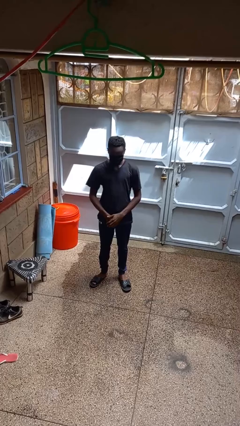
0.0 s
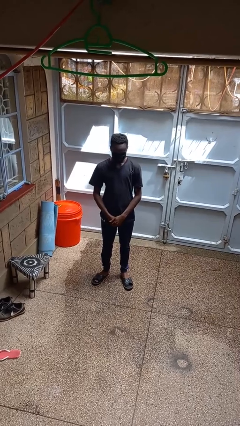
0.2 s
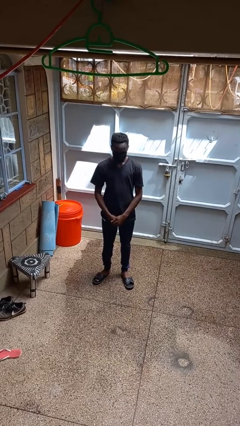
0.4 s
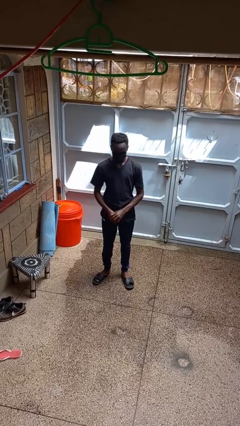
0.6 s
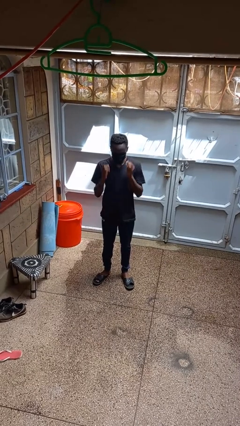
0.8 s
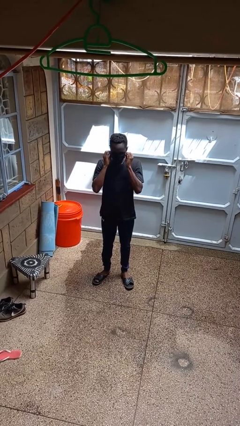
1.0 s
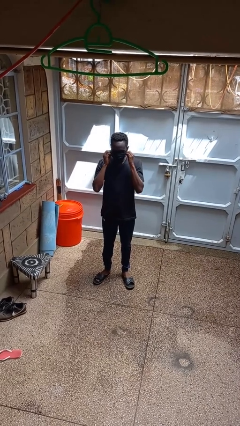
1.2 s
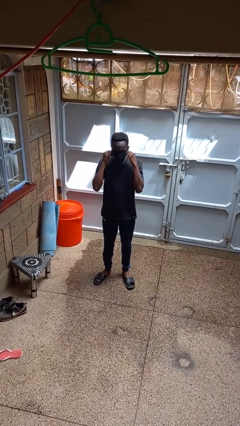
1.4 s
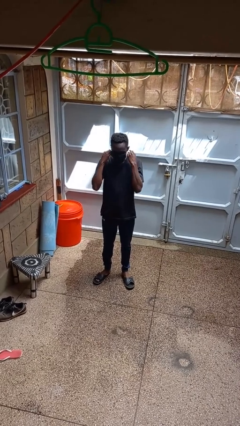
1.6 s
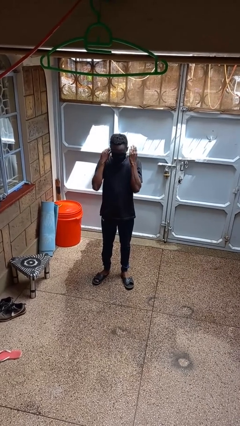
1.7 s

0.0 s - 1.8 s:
person takes off facemask

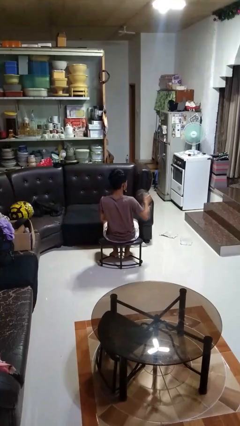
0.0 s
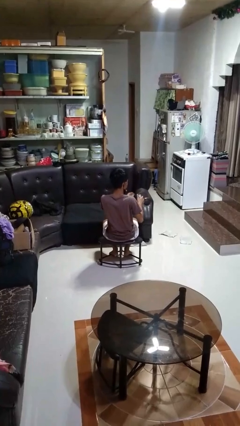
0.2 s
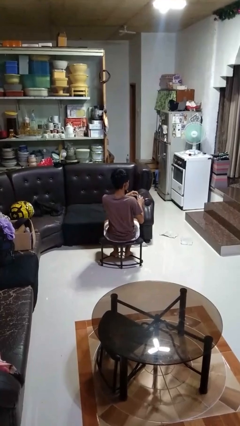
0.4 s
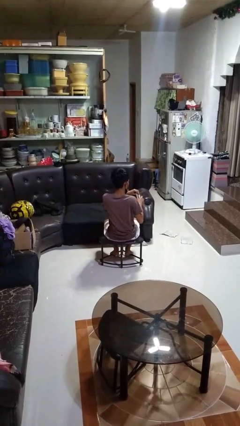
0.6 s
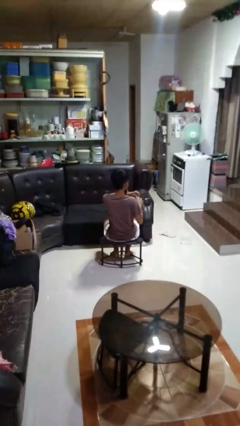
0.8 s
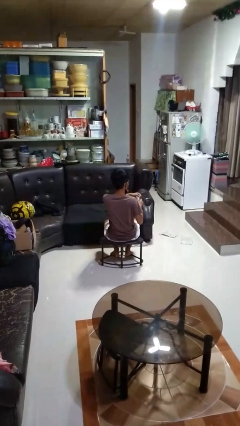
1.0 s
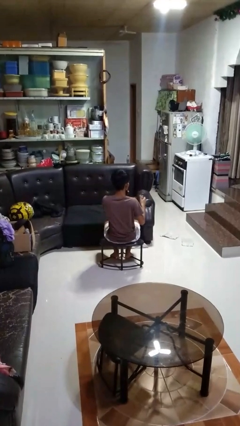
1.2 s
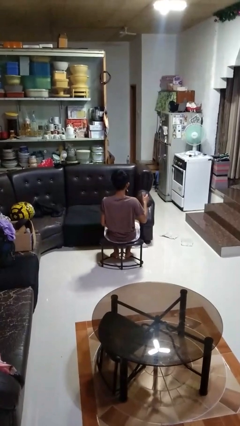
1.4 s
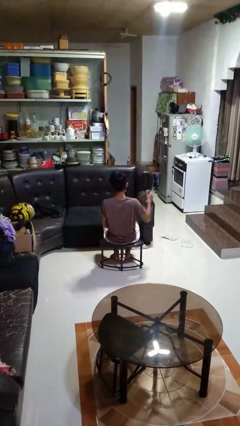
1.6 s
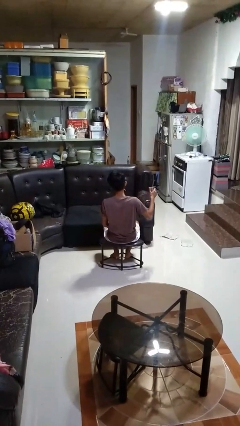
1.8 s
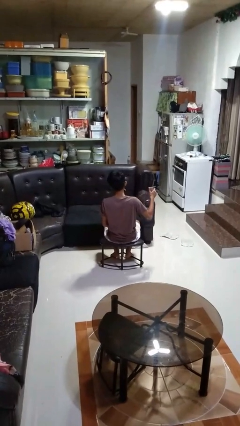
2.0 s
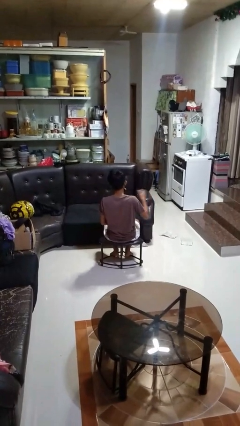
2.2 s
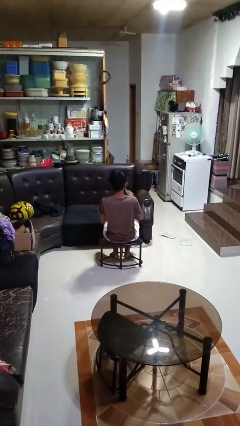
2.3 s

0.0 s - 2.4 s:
person opens beverage can

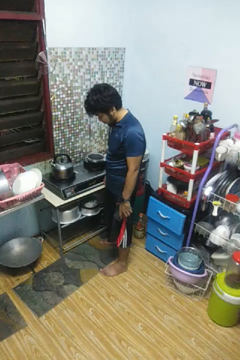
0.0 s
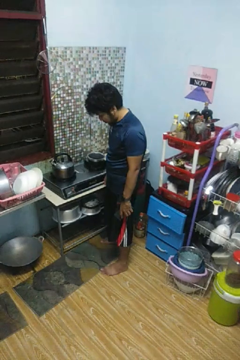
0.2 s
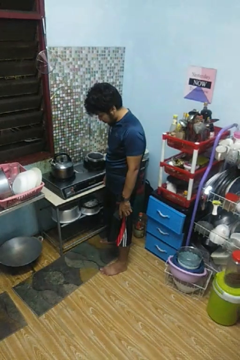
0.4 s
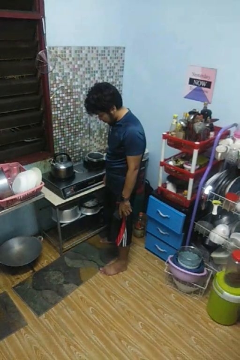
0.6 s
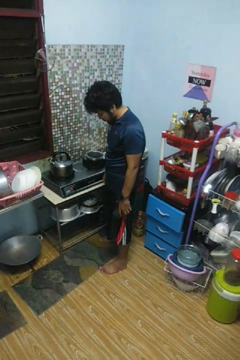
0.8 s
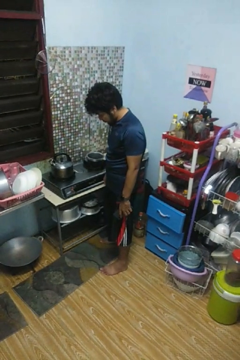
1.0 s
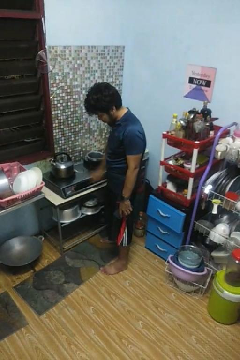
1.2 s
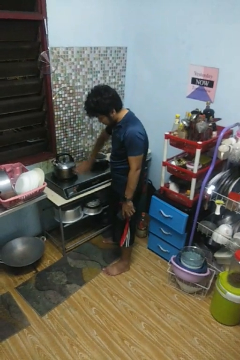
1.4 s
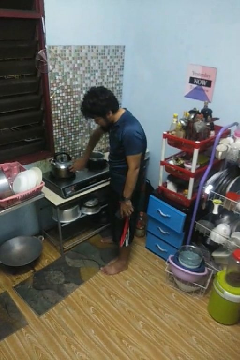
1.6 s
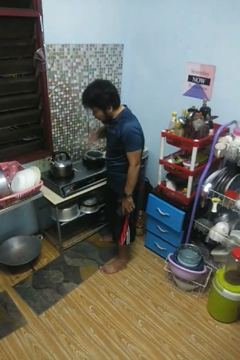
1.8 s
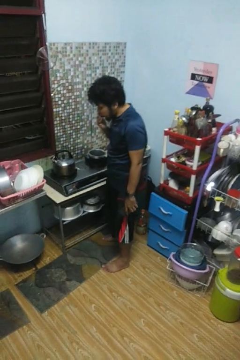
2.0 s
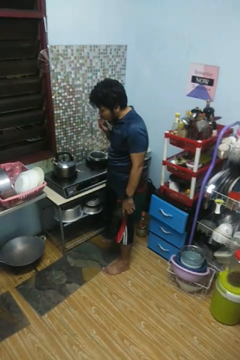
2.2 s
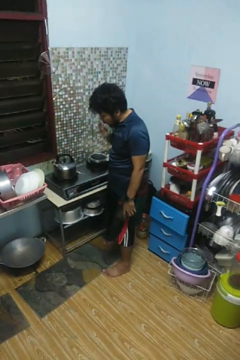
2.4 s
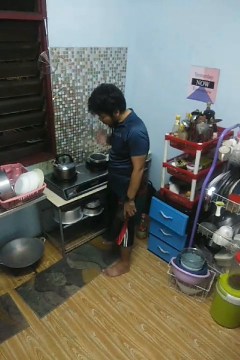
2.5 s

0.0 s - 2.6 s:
person burns hand

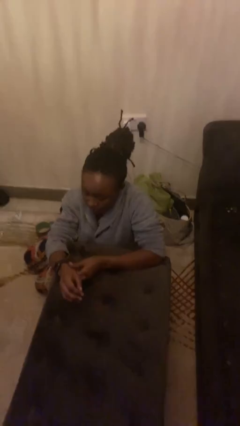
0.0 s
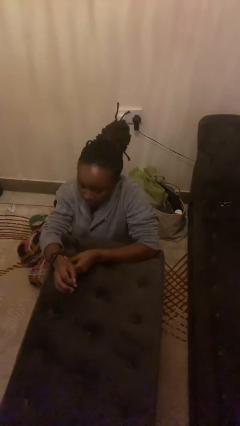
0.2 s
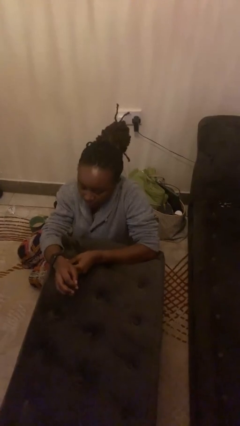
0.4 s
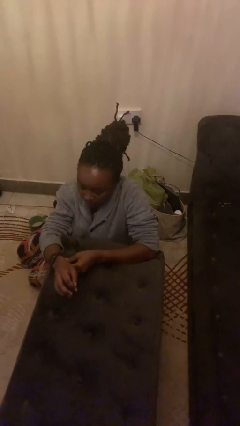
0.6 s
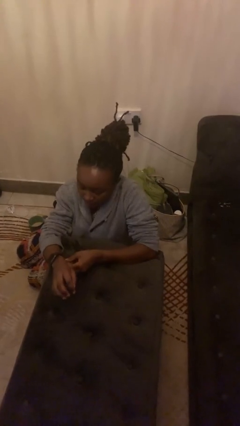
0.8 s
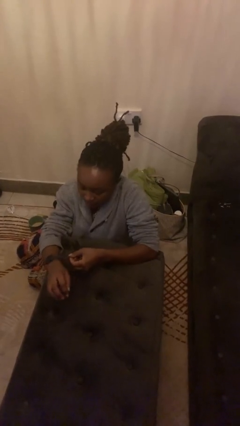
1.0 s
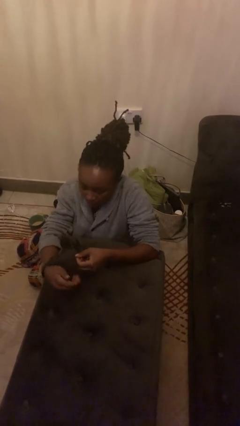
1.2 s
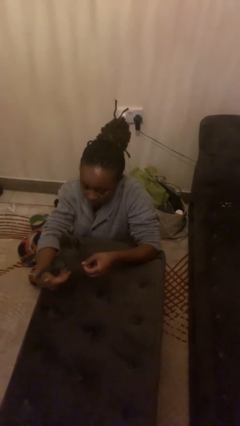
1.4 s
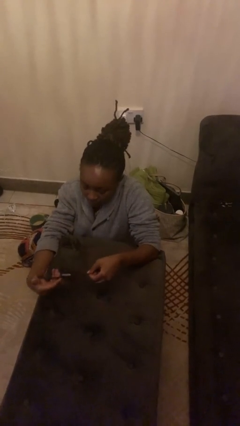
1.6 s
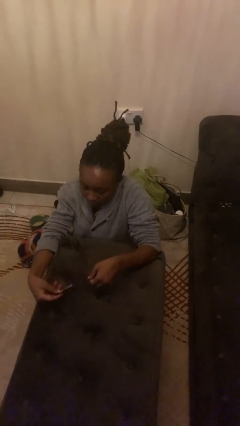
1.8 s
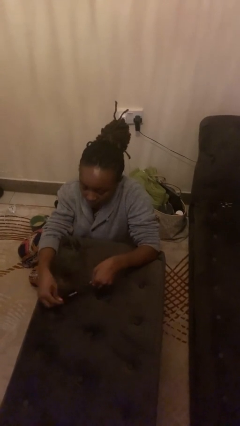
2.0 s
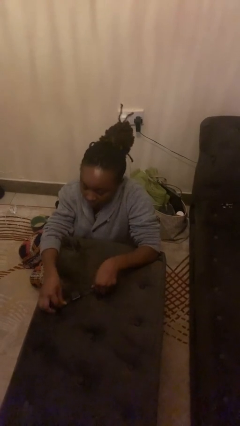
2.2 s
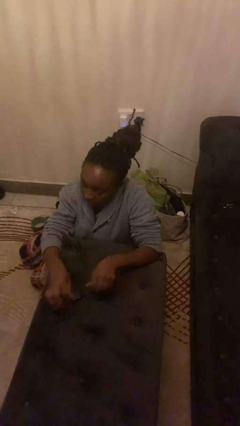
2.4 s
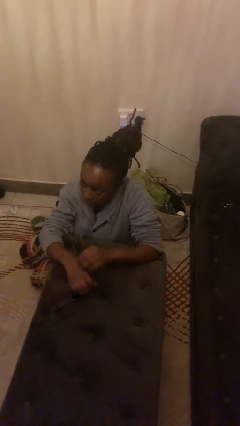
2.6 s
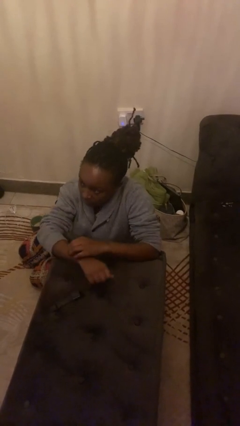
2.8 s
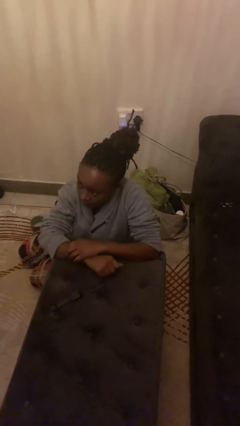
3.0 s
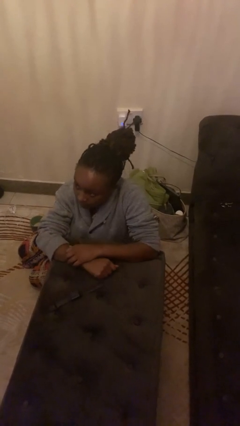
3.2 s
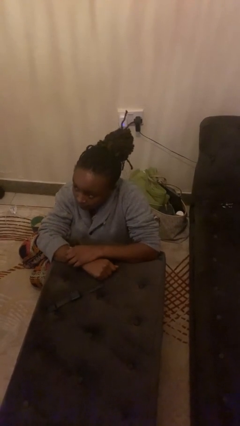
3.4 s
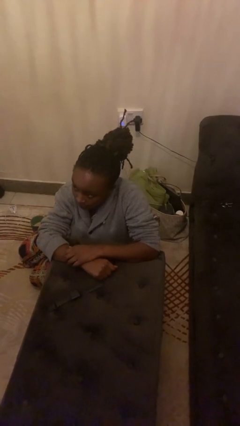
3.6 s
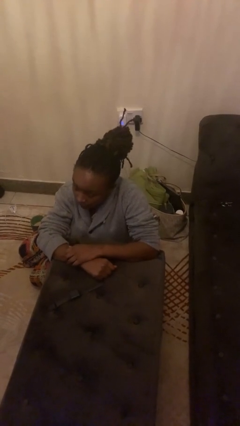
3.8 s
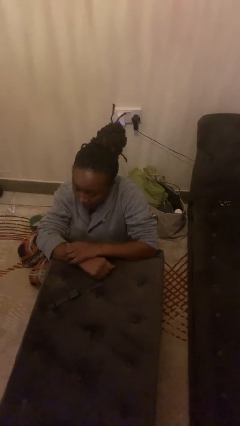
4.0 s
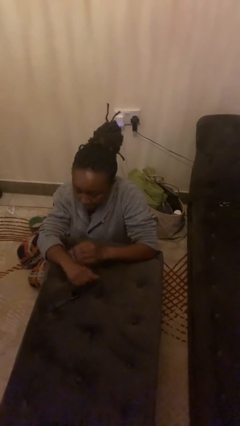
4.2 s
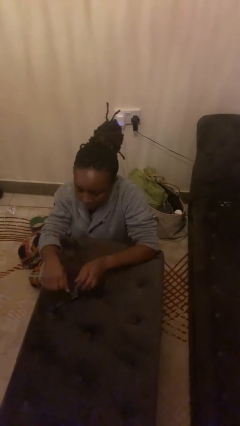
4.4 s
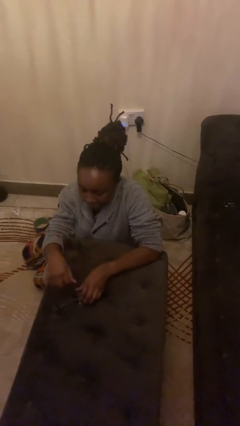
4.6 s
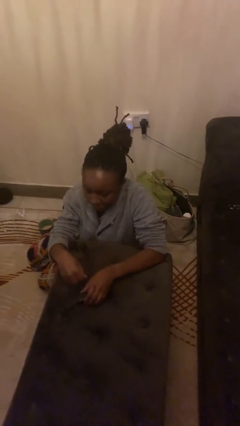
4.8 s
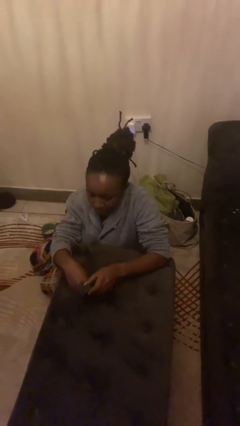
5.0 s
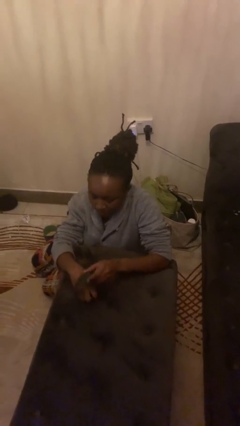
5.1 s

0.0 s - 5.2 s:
person takes off wristwatch

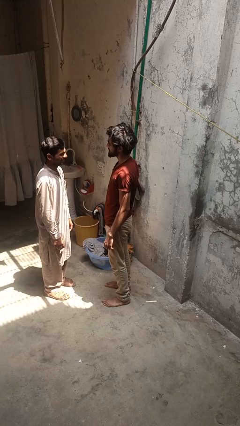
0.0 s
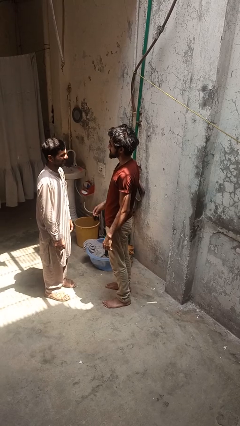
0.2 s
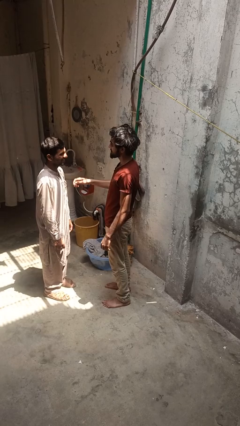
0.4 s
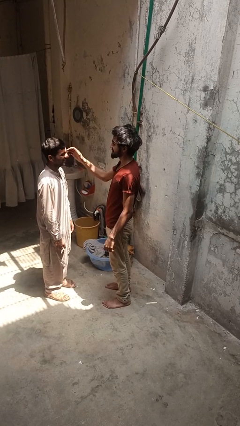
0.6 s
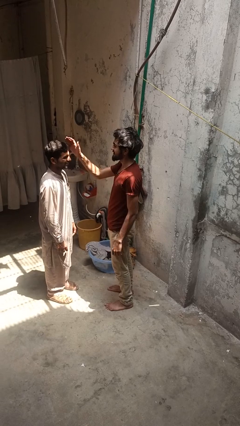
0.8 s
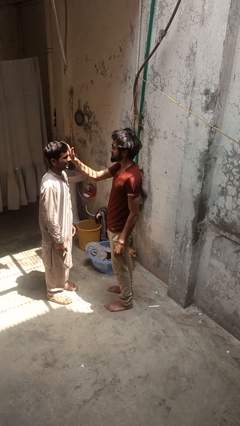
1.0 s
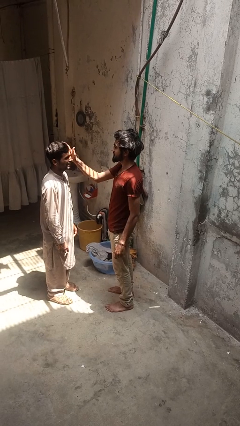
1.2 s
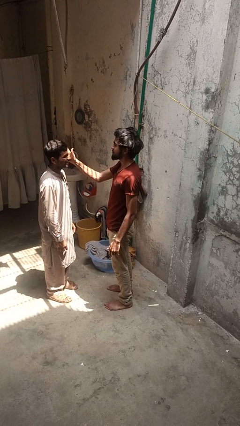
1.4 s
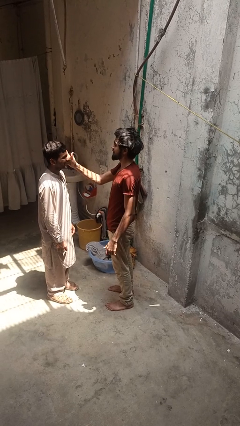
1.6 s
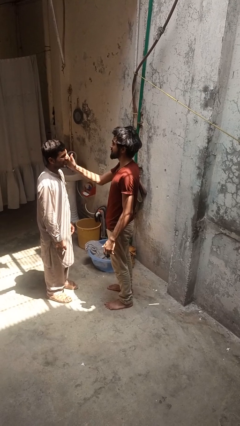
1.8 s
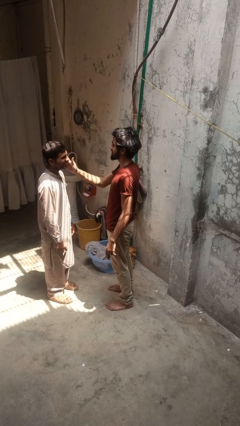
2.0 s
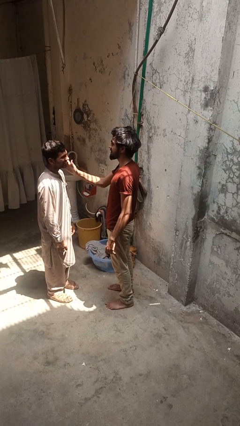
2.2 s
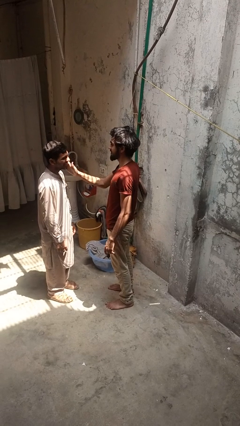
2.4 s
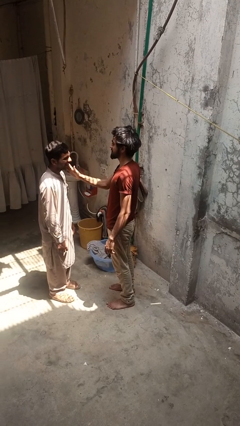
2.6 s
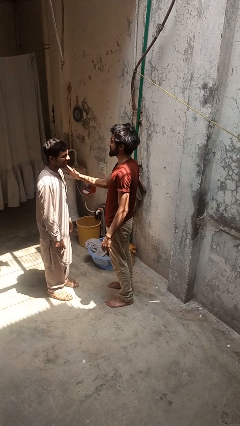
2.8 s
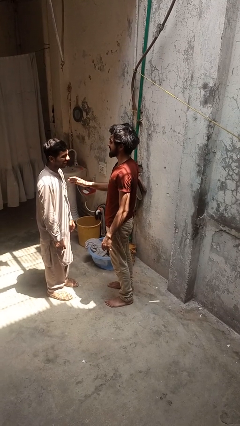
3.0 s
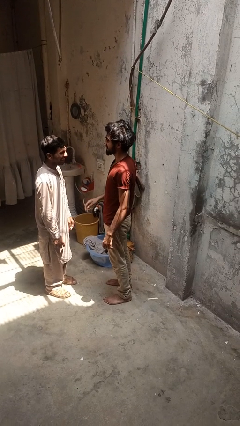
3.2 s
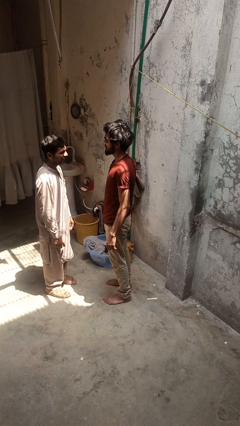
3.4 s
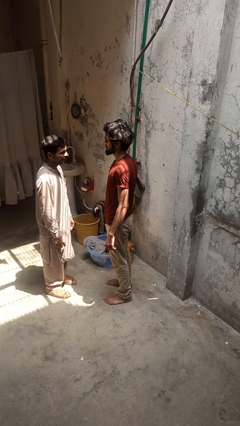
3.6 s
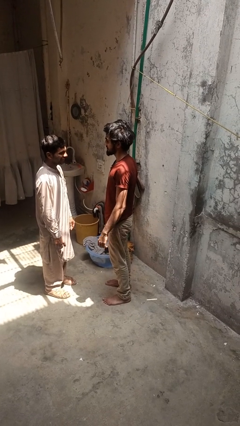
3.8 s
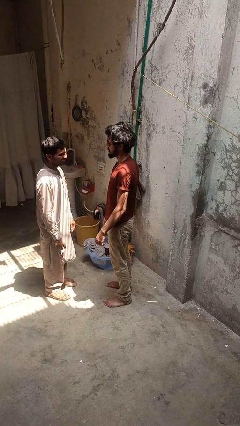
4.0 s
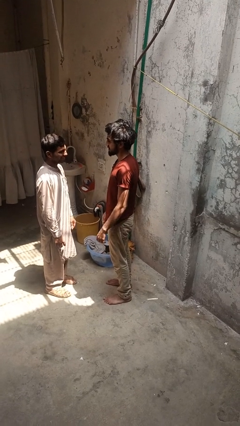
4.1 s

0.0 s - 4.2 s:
person touches face of person

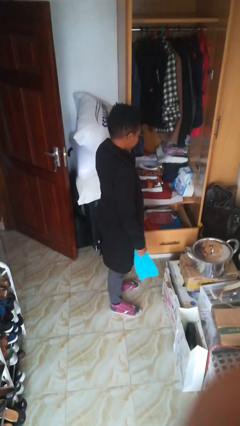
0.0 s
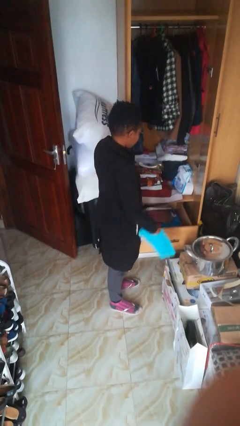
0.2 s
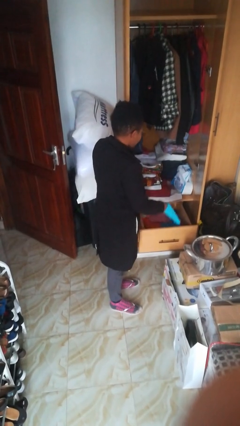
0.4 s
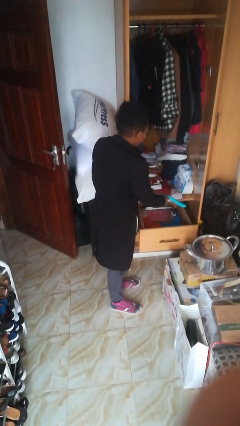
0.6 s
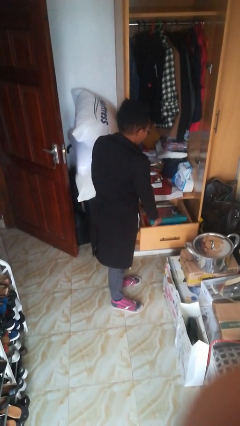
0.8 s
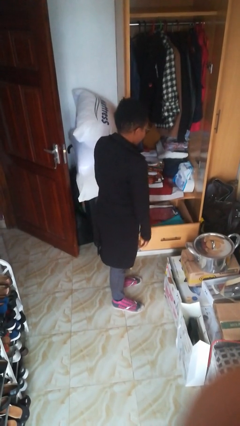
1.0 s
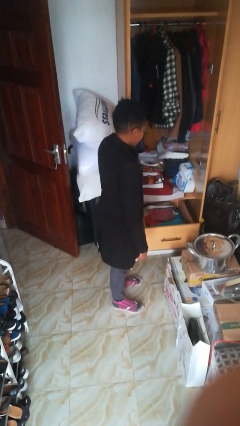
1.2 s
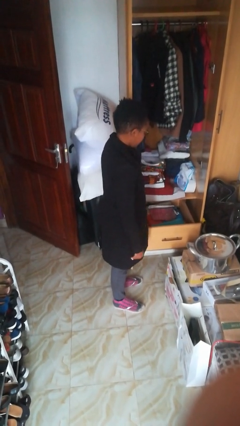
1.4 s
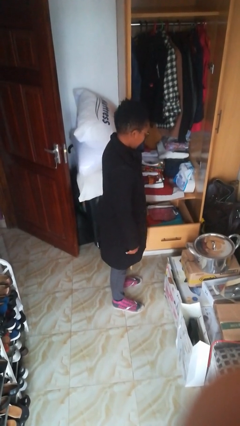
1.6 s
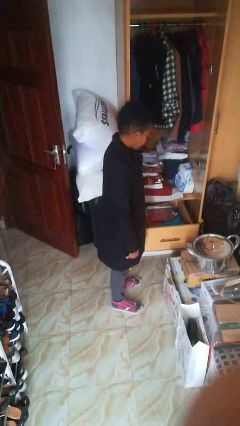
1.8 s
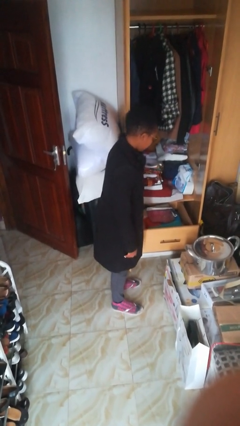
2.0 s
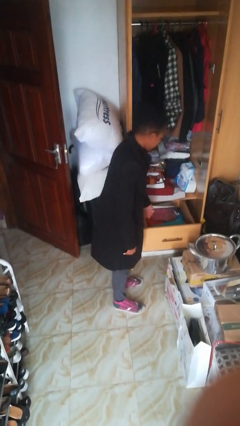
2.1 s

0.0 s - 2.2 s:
person puts clothes into dresser
